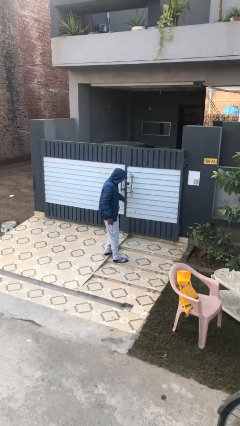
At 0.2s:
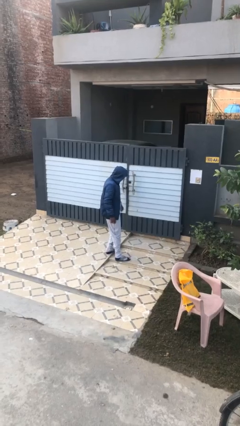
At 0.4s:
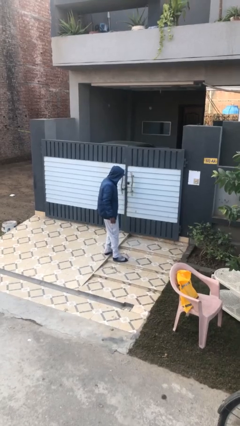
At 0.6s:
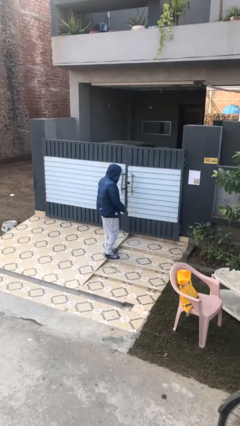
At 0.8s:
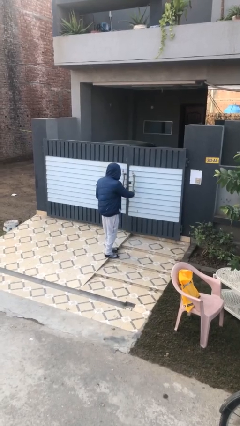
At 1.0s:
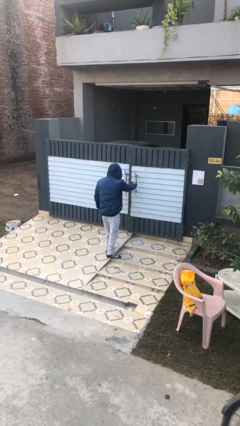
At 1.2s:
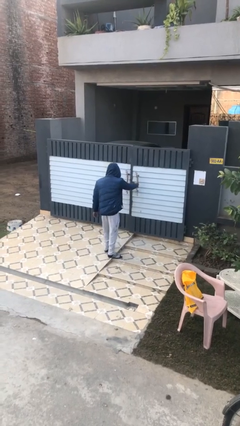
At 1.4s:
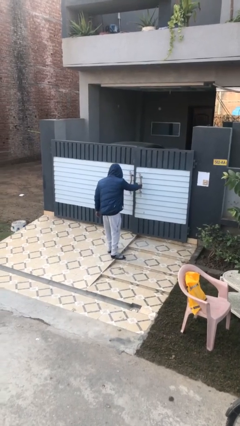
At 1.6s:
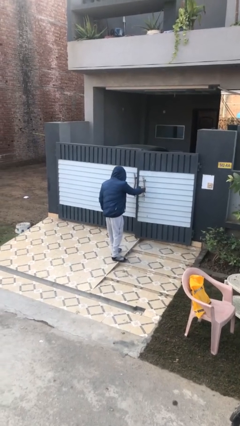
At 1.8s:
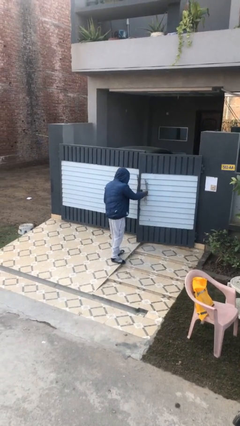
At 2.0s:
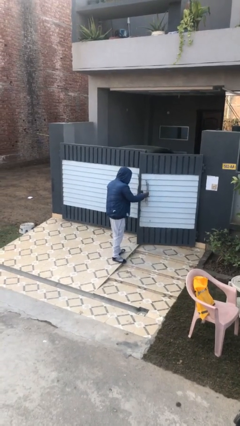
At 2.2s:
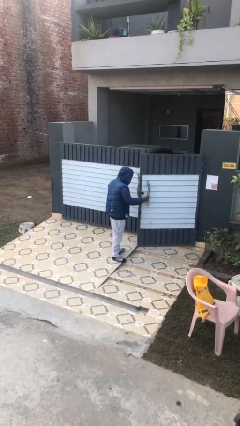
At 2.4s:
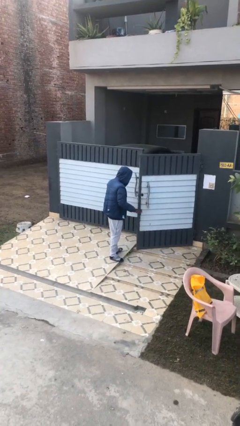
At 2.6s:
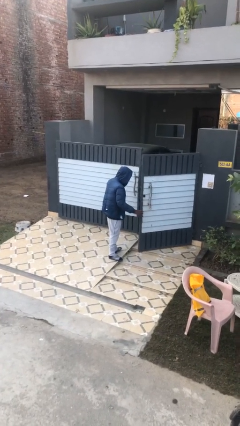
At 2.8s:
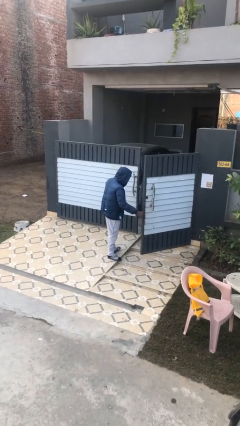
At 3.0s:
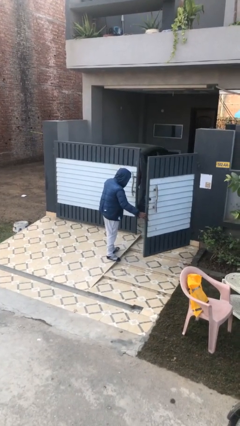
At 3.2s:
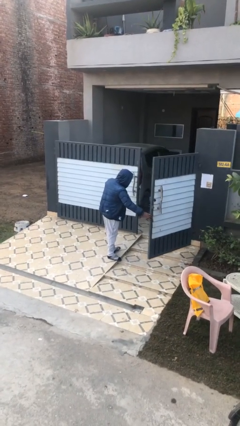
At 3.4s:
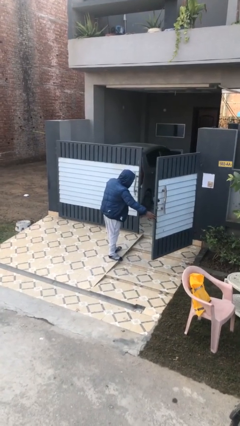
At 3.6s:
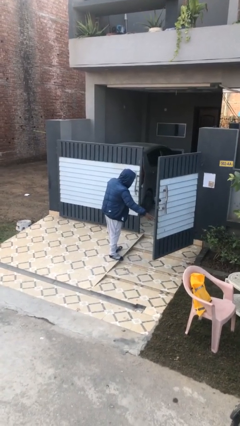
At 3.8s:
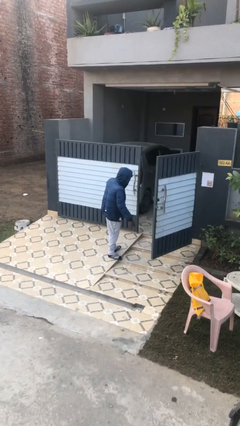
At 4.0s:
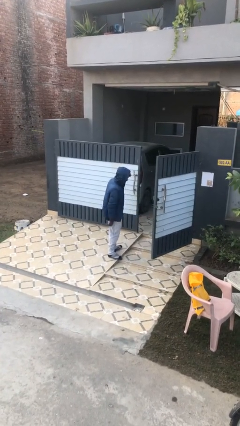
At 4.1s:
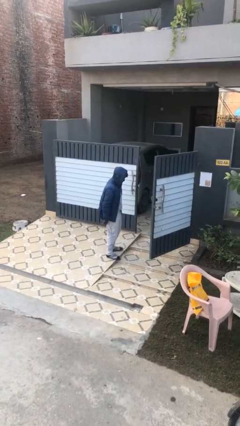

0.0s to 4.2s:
person opens facility door

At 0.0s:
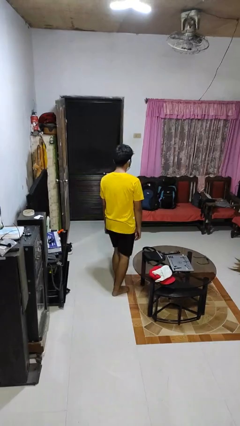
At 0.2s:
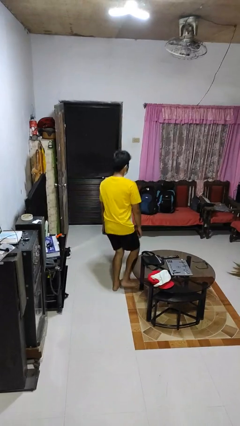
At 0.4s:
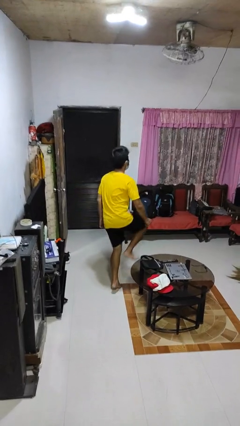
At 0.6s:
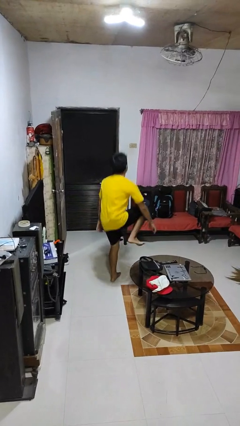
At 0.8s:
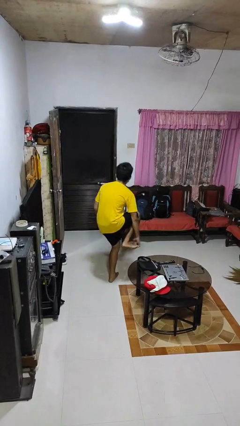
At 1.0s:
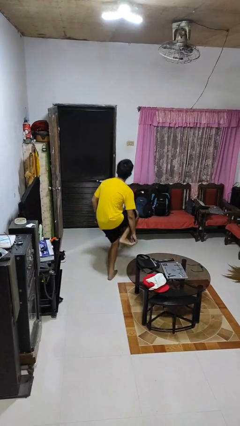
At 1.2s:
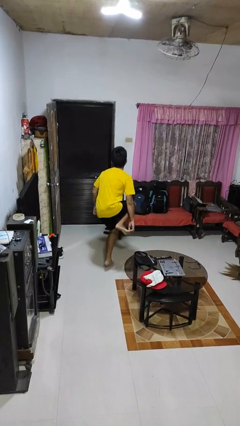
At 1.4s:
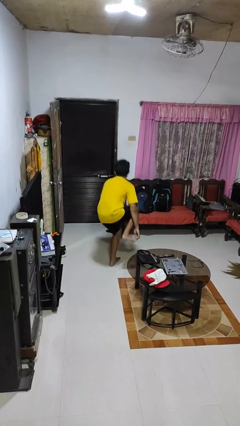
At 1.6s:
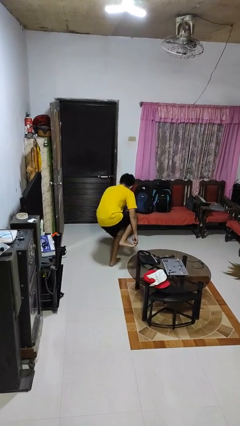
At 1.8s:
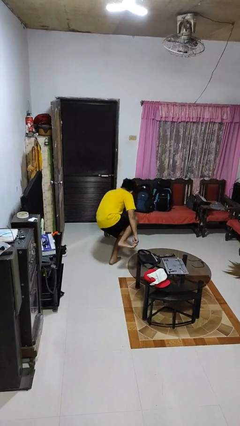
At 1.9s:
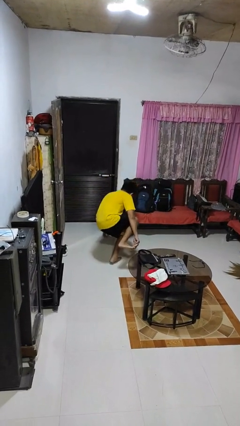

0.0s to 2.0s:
person trips on object on floor

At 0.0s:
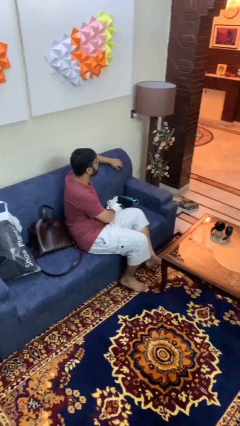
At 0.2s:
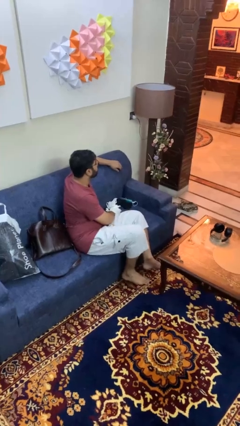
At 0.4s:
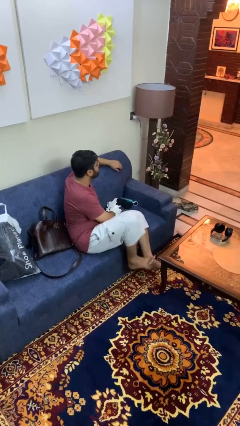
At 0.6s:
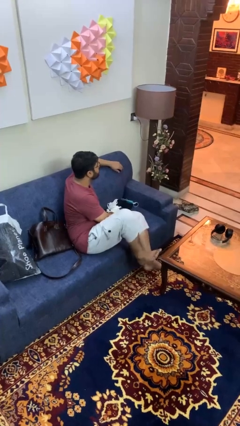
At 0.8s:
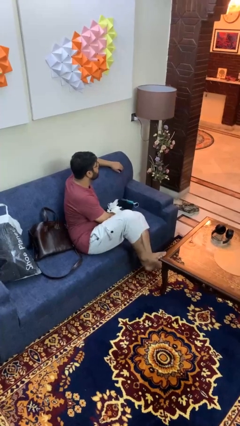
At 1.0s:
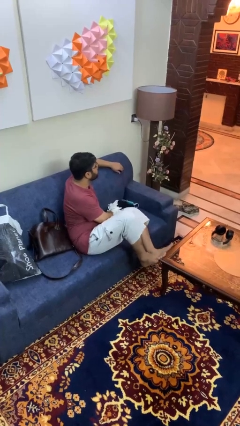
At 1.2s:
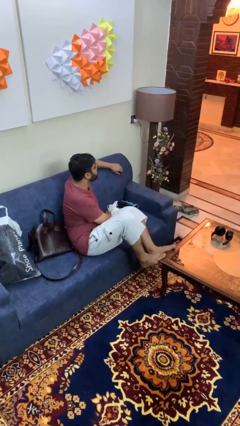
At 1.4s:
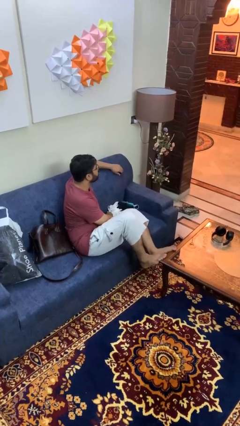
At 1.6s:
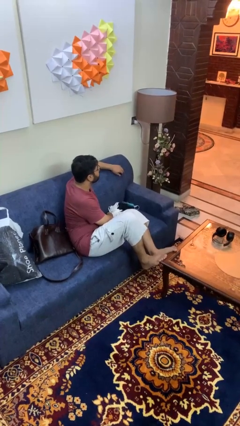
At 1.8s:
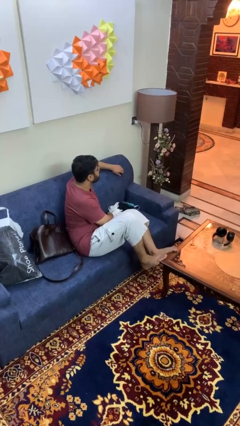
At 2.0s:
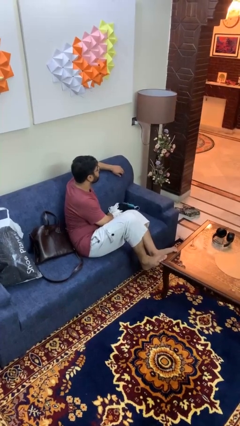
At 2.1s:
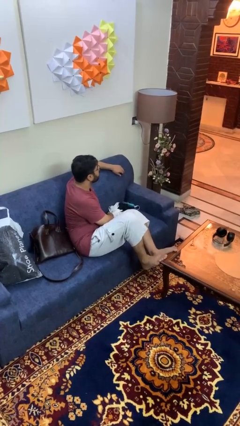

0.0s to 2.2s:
person puts feet up

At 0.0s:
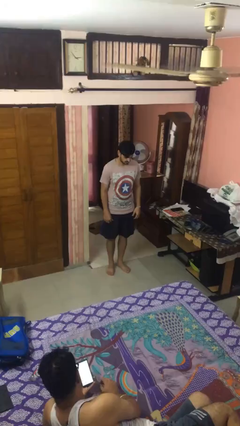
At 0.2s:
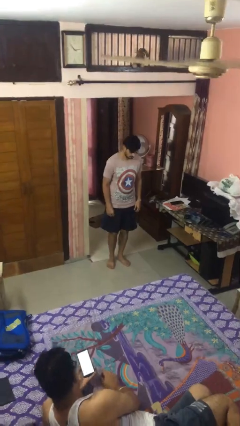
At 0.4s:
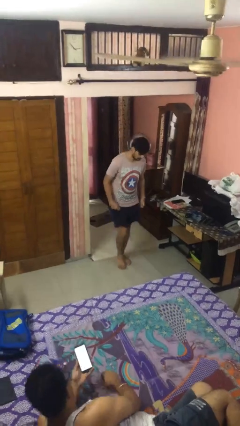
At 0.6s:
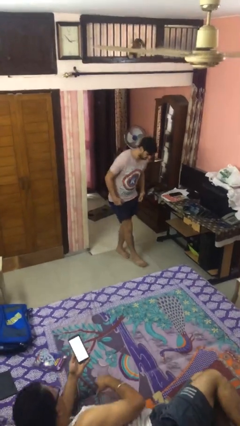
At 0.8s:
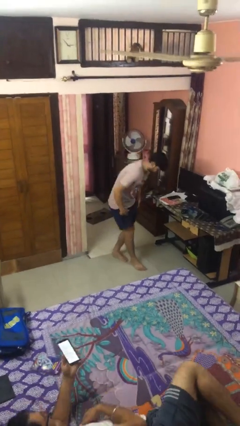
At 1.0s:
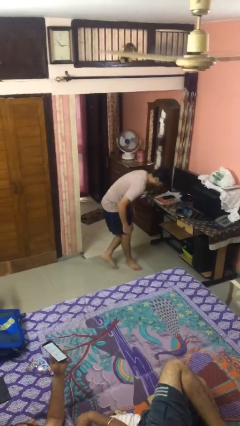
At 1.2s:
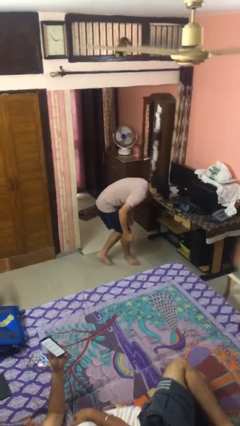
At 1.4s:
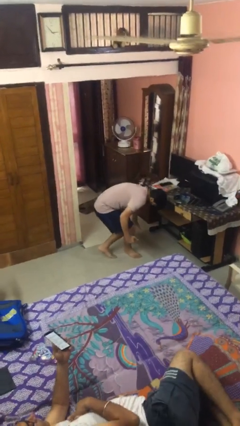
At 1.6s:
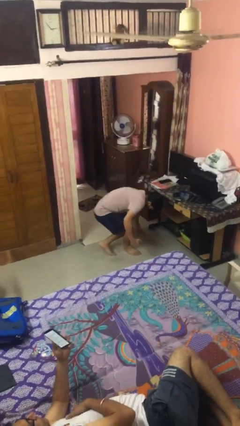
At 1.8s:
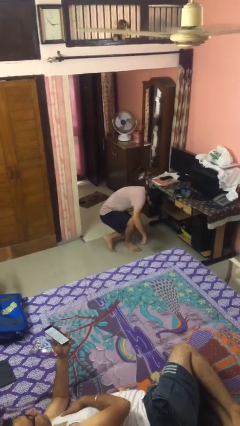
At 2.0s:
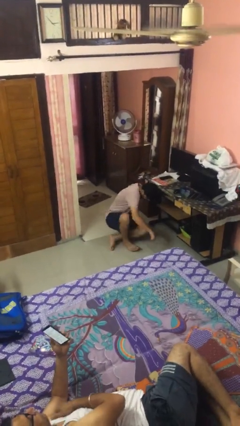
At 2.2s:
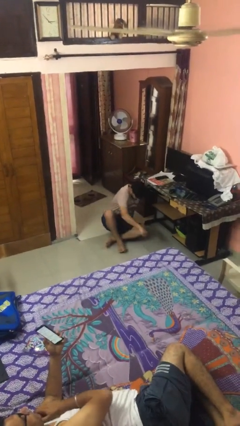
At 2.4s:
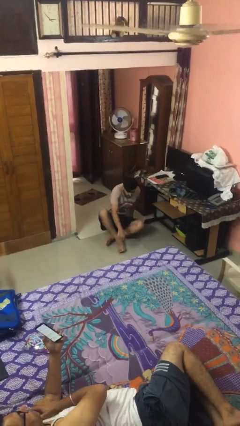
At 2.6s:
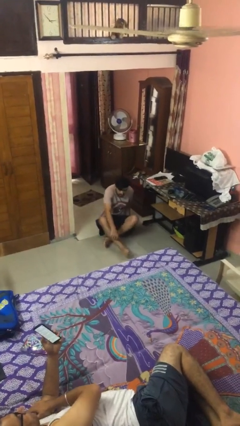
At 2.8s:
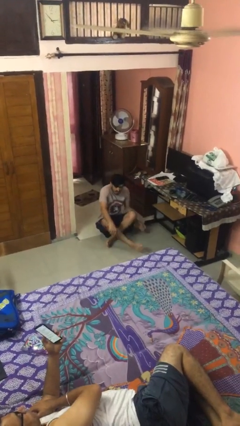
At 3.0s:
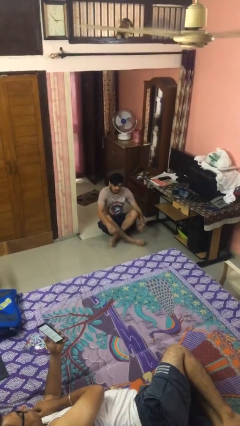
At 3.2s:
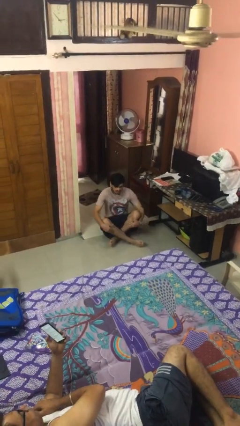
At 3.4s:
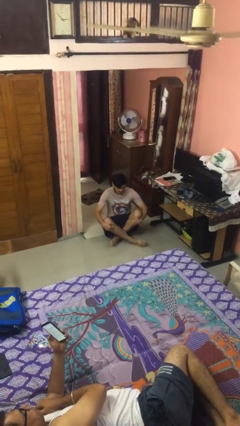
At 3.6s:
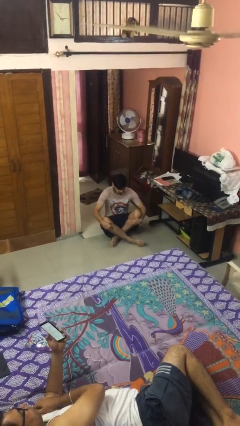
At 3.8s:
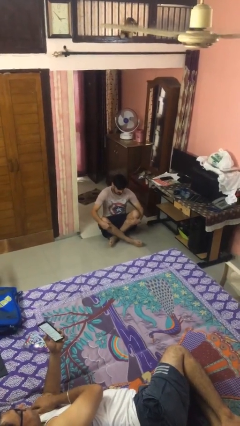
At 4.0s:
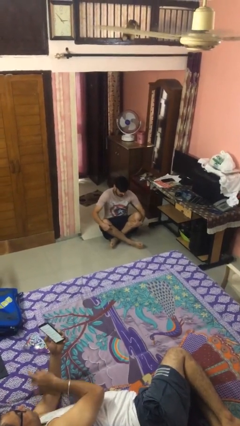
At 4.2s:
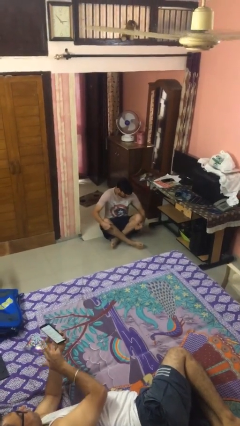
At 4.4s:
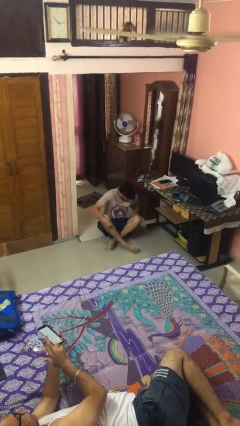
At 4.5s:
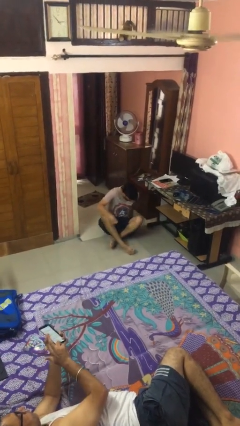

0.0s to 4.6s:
person sits crisscross

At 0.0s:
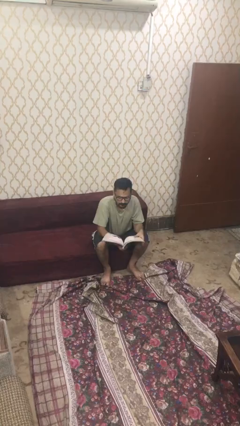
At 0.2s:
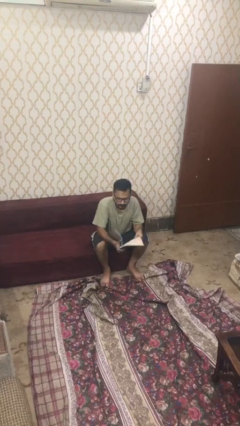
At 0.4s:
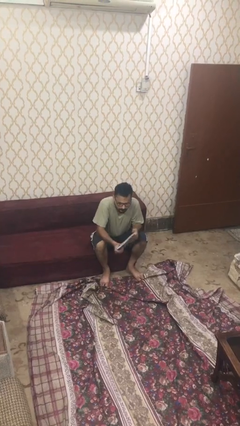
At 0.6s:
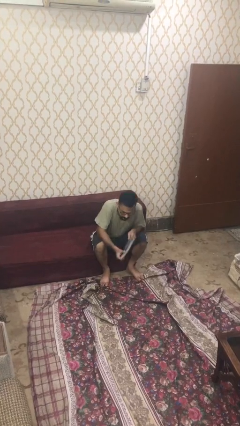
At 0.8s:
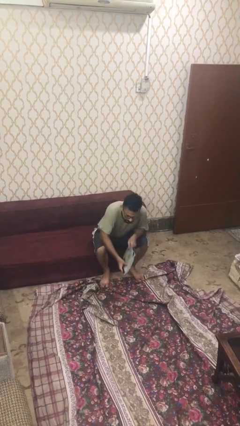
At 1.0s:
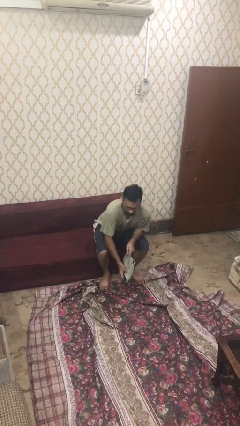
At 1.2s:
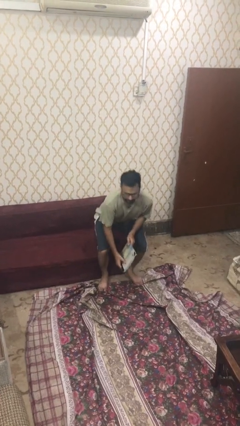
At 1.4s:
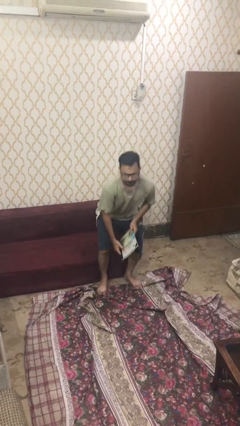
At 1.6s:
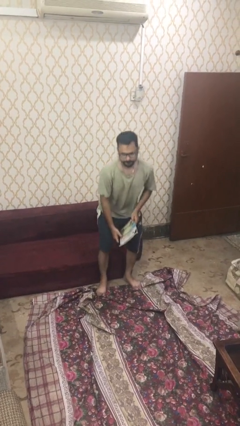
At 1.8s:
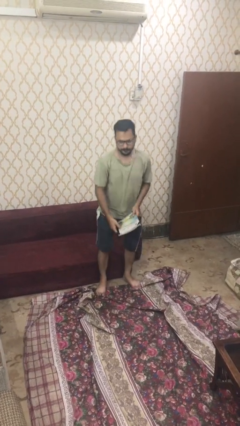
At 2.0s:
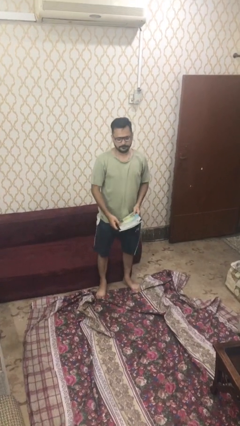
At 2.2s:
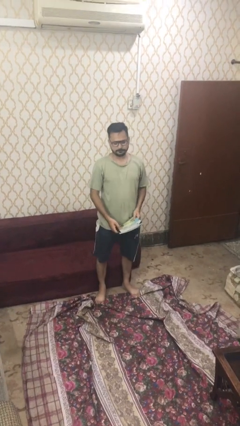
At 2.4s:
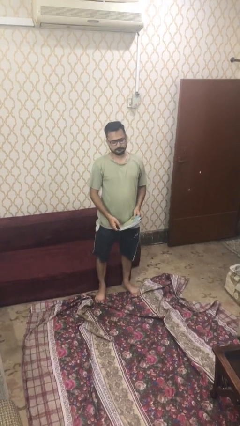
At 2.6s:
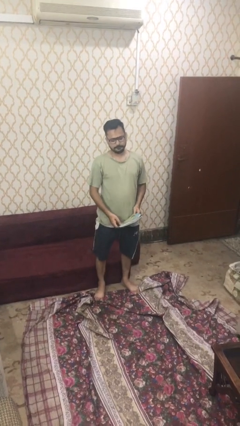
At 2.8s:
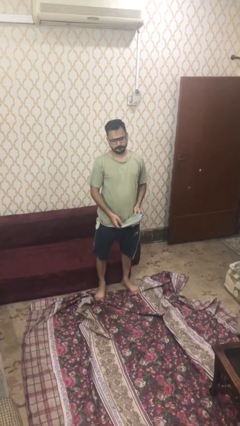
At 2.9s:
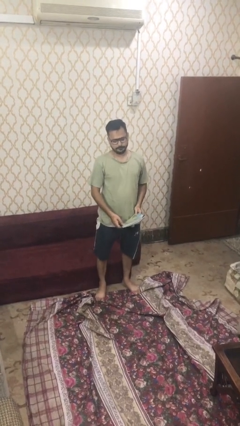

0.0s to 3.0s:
person stands up

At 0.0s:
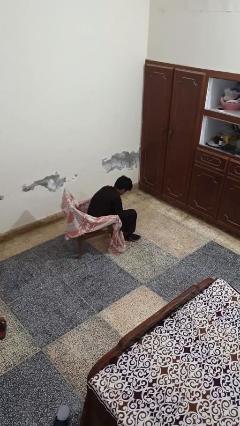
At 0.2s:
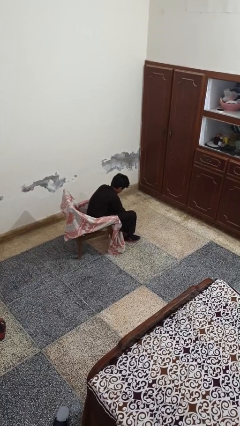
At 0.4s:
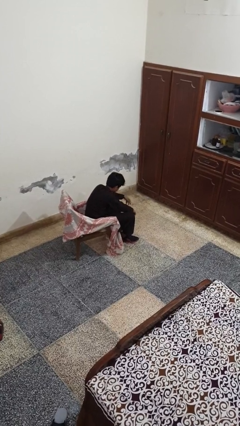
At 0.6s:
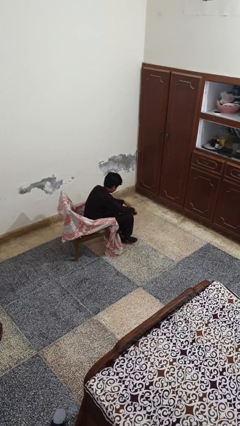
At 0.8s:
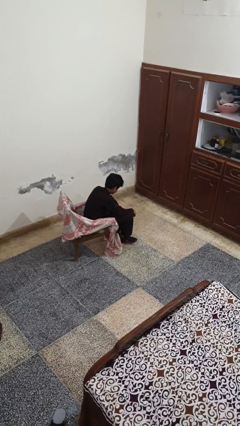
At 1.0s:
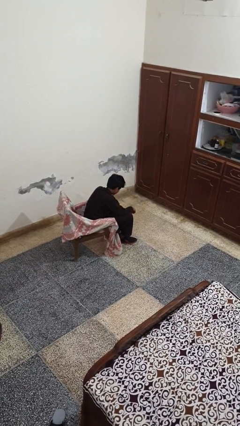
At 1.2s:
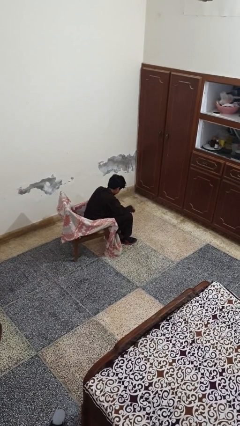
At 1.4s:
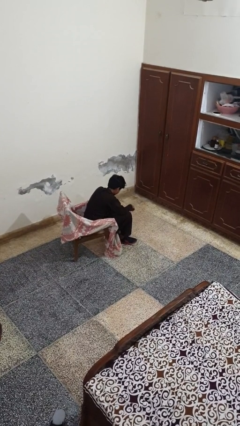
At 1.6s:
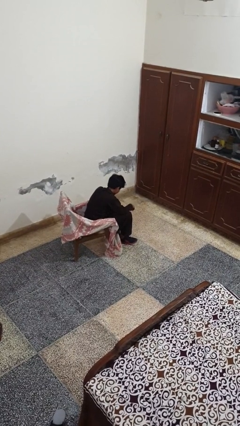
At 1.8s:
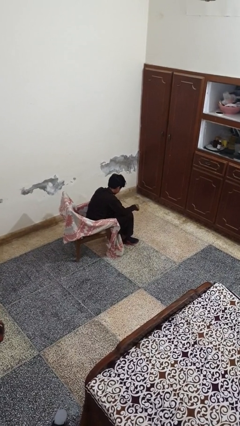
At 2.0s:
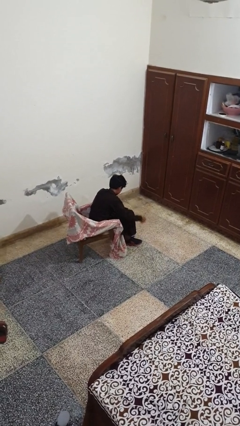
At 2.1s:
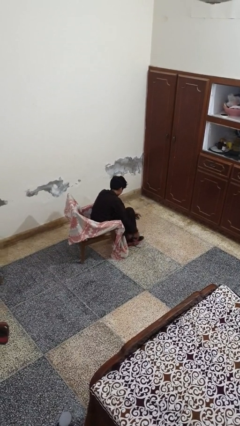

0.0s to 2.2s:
person takes off shoes
